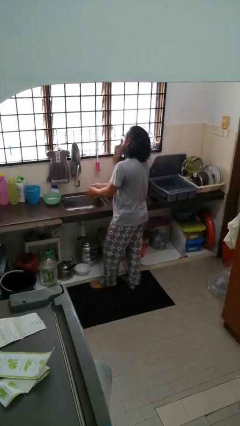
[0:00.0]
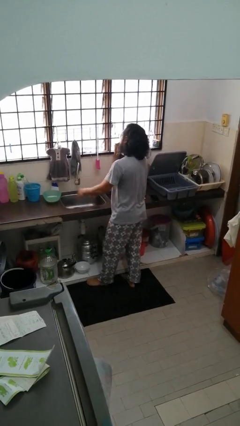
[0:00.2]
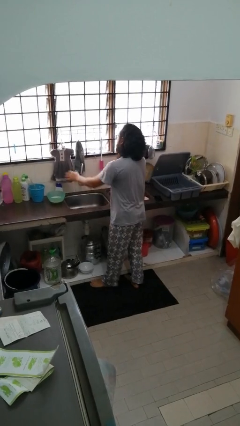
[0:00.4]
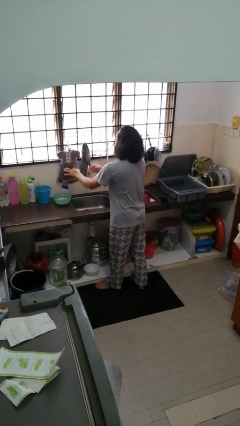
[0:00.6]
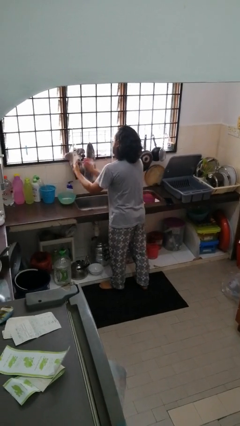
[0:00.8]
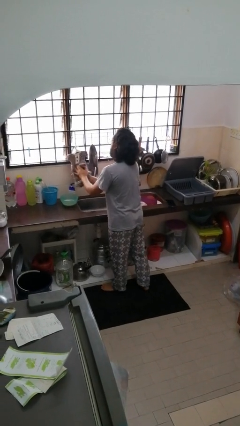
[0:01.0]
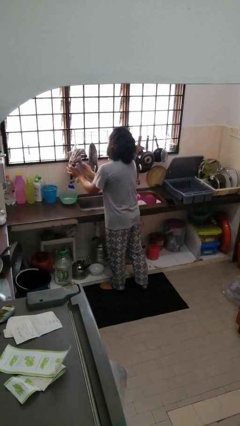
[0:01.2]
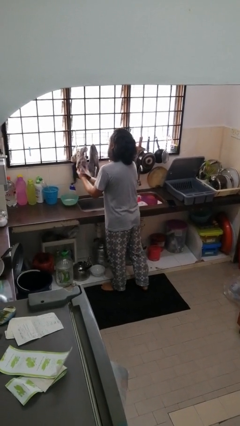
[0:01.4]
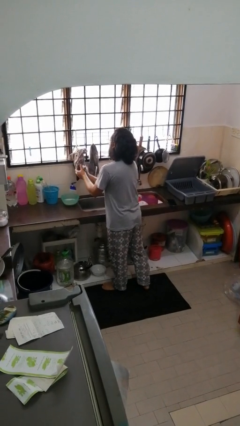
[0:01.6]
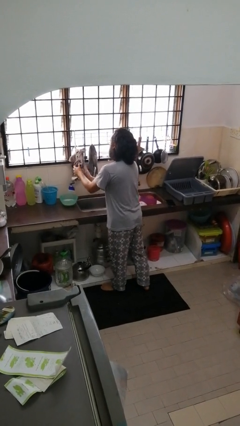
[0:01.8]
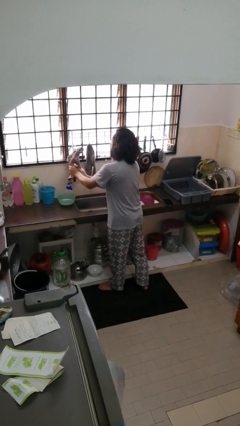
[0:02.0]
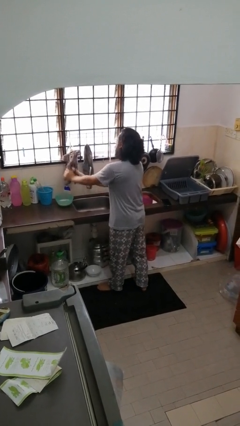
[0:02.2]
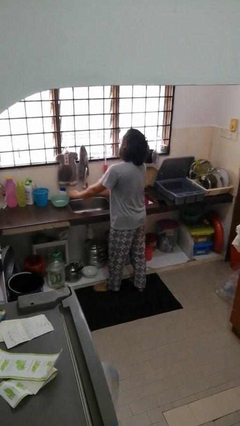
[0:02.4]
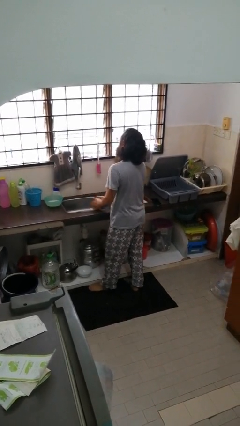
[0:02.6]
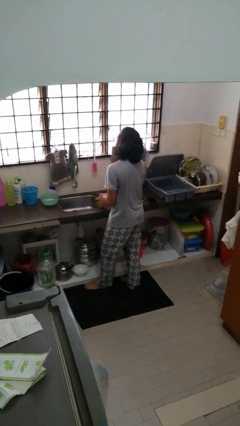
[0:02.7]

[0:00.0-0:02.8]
person dries hands with towel

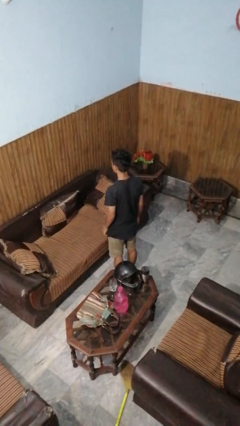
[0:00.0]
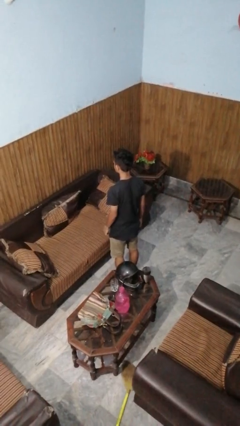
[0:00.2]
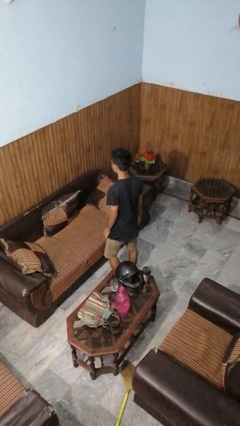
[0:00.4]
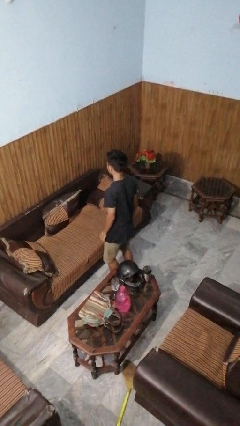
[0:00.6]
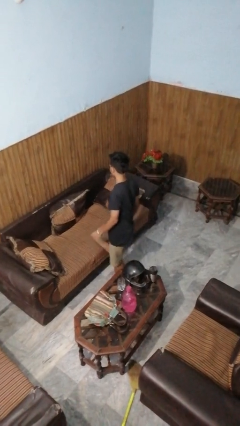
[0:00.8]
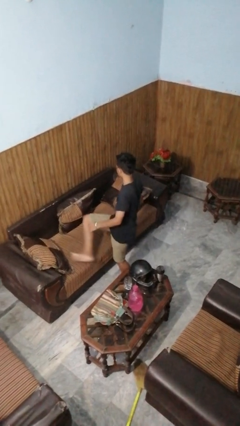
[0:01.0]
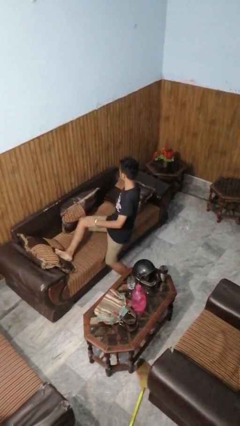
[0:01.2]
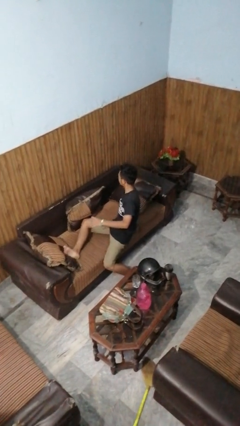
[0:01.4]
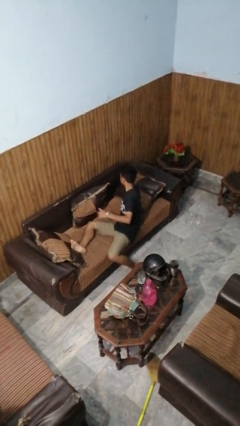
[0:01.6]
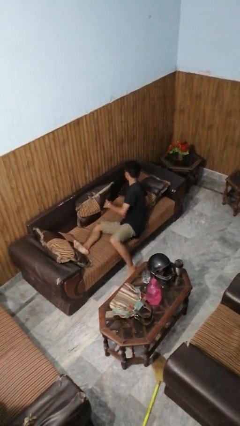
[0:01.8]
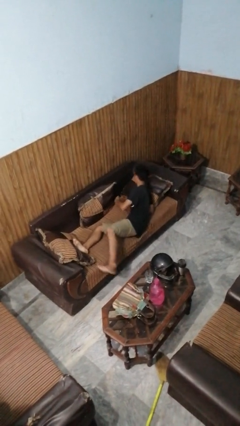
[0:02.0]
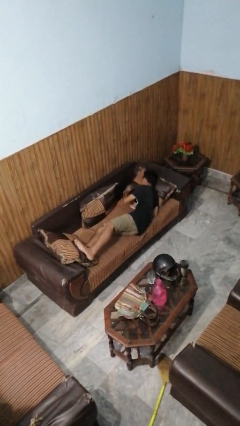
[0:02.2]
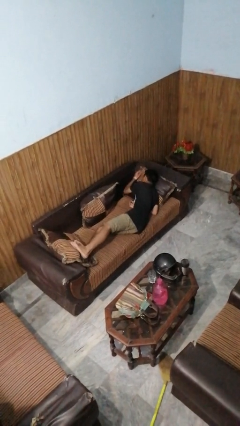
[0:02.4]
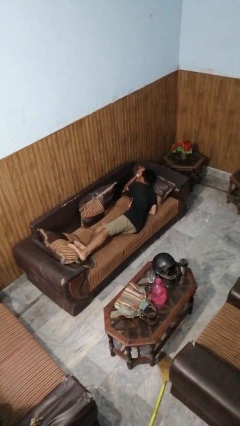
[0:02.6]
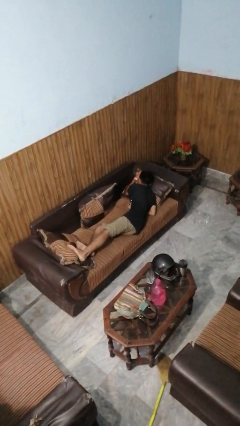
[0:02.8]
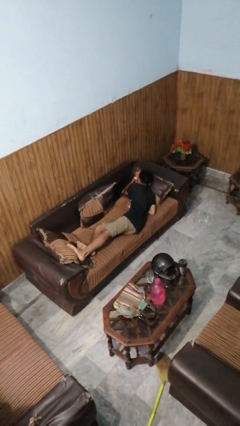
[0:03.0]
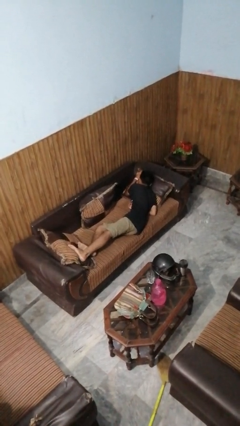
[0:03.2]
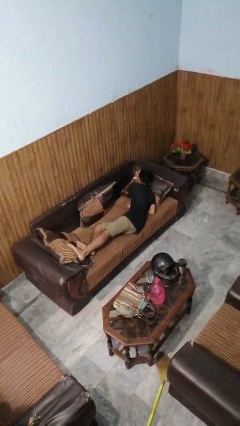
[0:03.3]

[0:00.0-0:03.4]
person lies down on couch

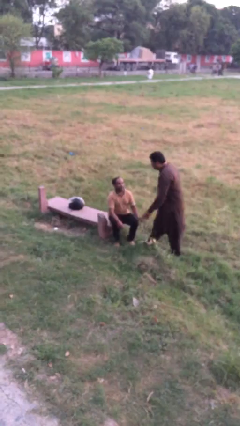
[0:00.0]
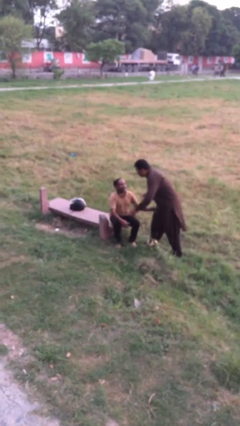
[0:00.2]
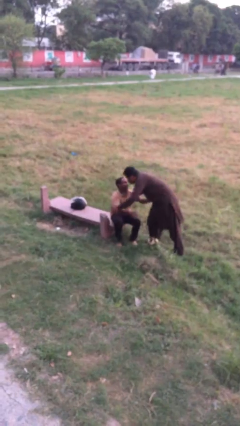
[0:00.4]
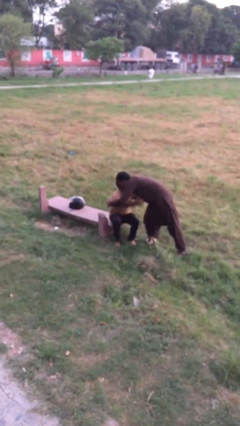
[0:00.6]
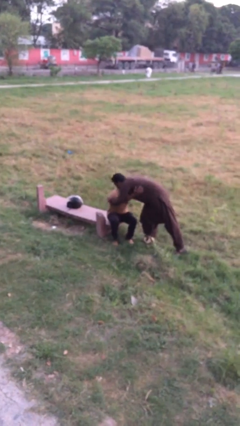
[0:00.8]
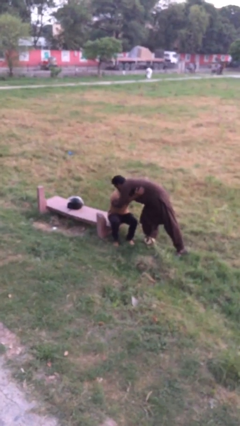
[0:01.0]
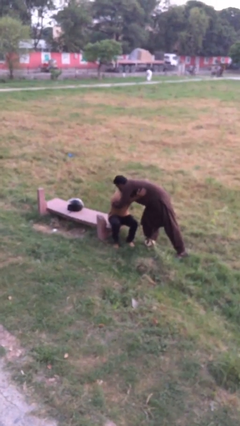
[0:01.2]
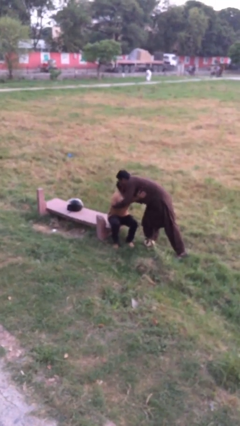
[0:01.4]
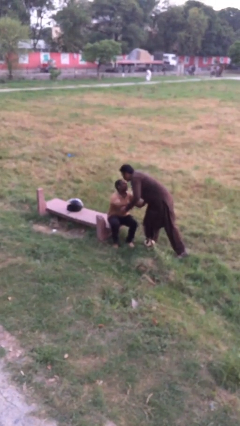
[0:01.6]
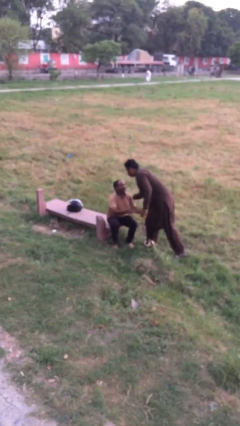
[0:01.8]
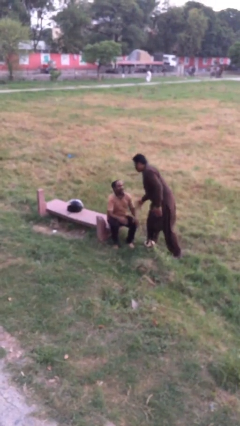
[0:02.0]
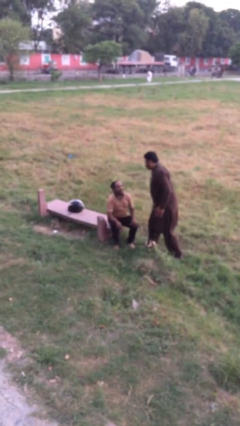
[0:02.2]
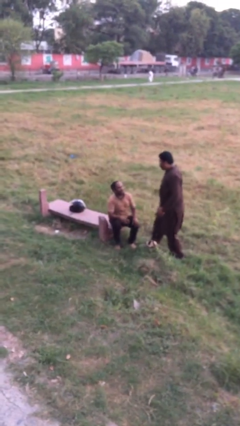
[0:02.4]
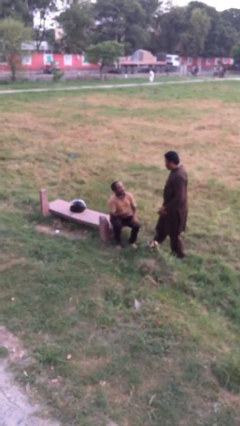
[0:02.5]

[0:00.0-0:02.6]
person embraces person

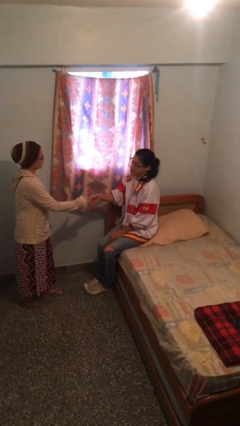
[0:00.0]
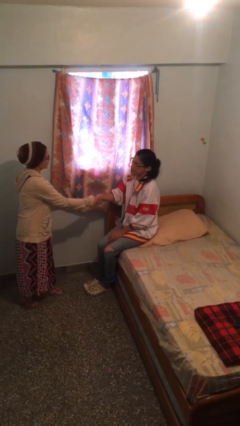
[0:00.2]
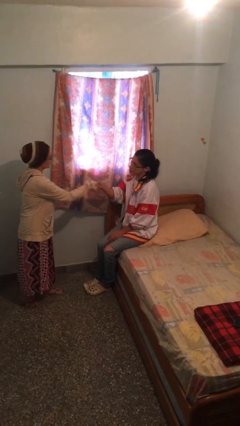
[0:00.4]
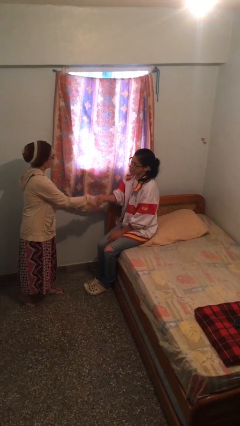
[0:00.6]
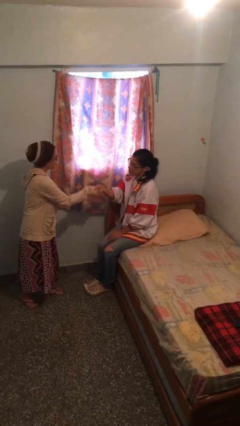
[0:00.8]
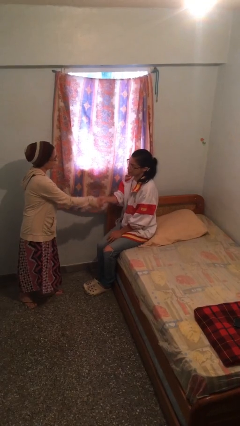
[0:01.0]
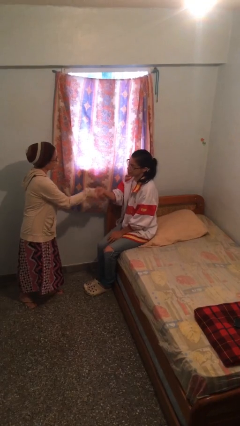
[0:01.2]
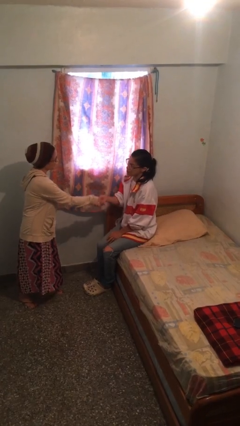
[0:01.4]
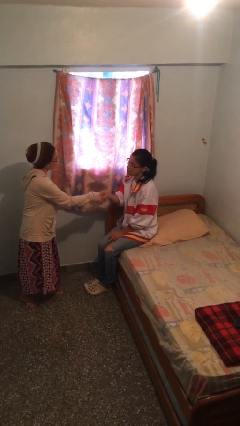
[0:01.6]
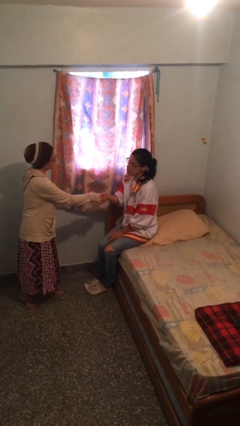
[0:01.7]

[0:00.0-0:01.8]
person shakes hand

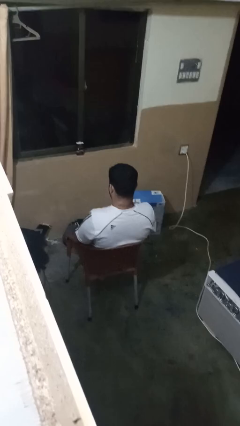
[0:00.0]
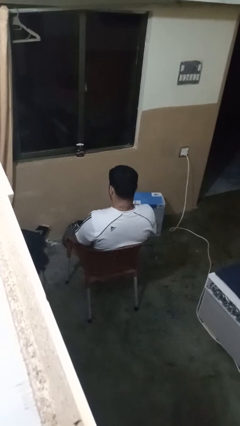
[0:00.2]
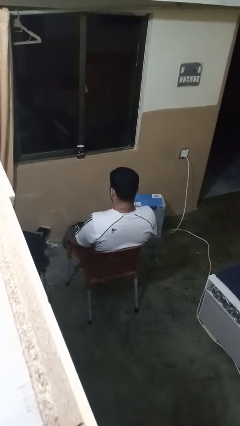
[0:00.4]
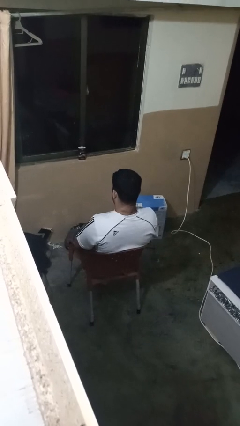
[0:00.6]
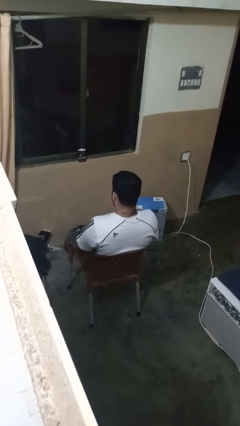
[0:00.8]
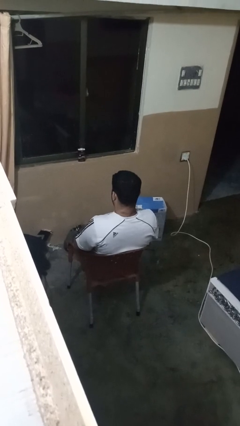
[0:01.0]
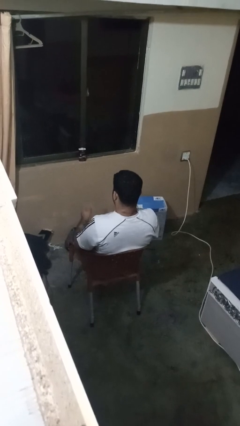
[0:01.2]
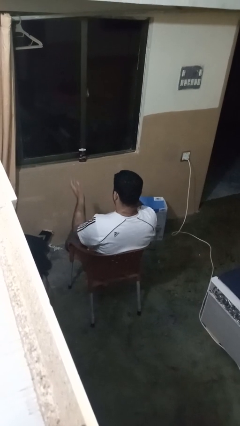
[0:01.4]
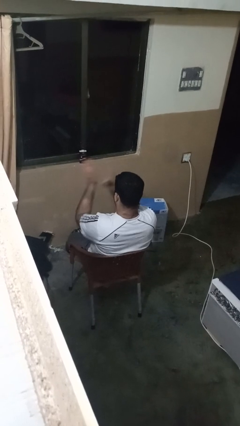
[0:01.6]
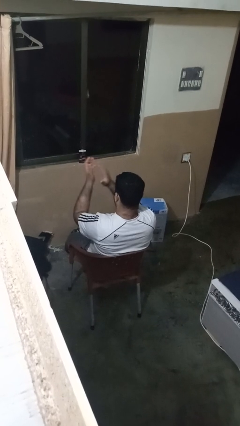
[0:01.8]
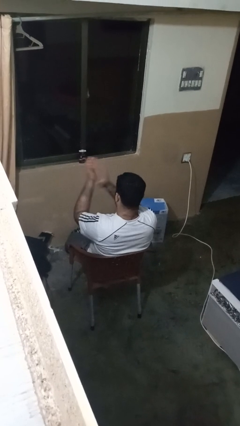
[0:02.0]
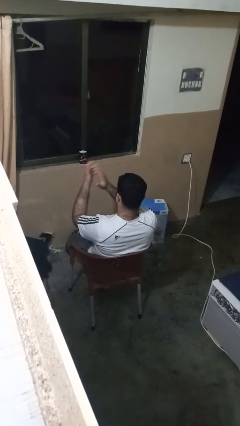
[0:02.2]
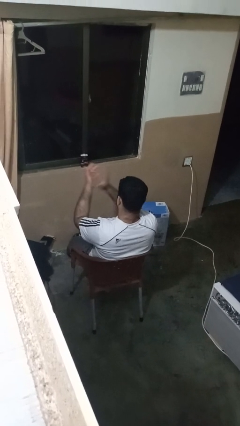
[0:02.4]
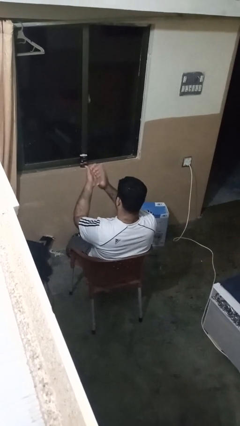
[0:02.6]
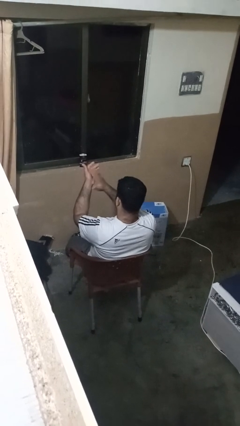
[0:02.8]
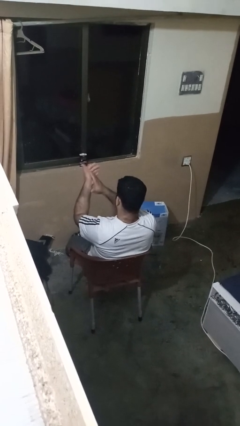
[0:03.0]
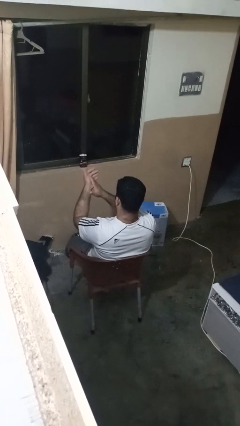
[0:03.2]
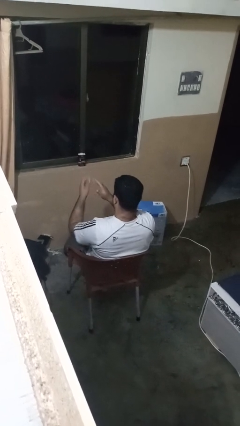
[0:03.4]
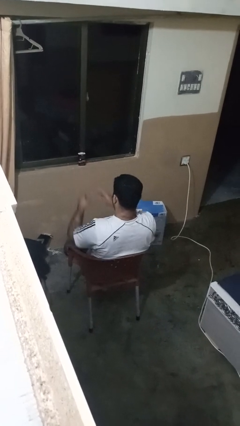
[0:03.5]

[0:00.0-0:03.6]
person claps hands

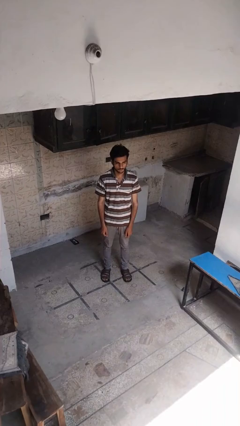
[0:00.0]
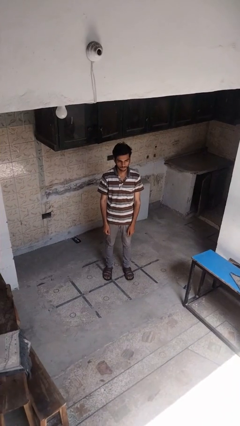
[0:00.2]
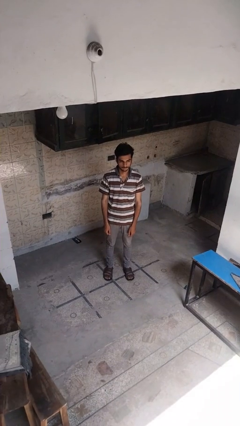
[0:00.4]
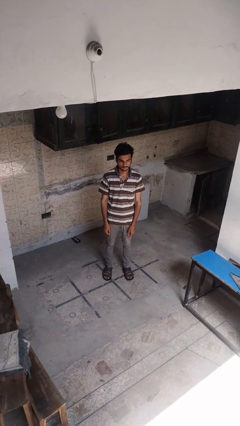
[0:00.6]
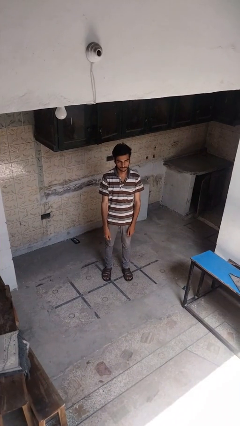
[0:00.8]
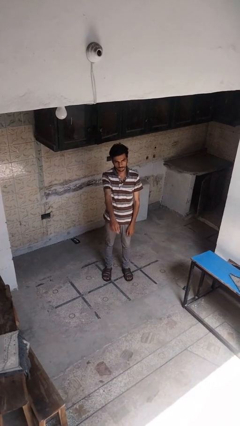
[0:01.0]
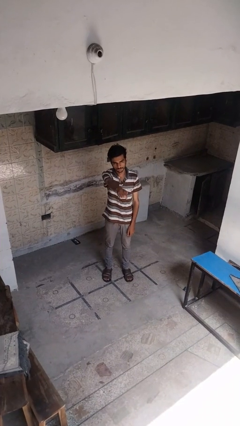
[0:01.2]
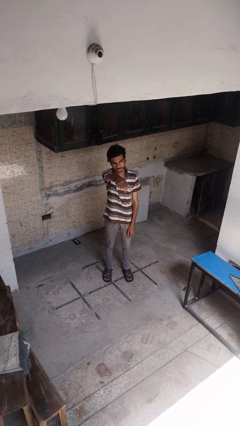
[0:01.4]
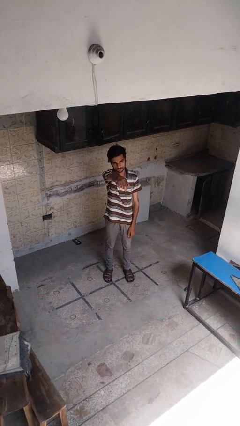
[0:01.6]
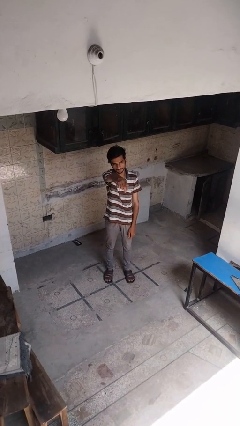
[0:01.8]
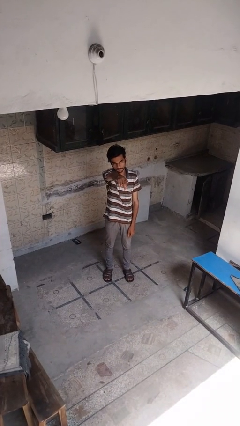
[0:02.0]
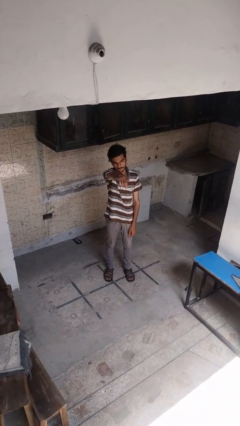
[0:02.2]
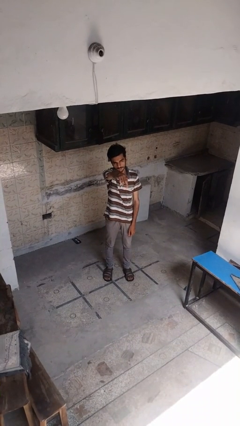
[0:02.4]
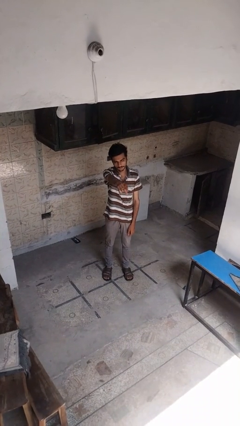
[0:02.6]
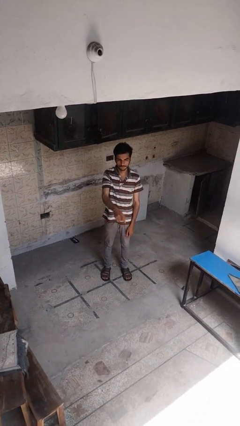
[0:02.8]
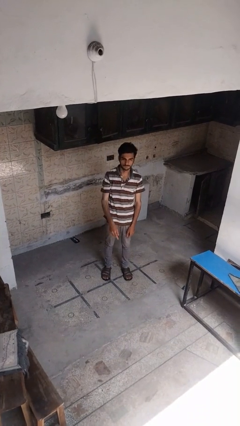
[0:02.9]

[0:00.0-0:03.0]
person points at person

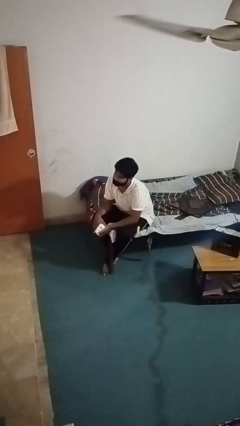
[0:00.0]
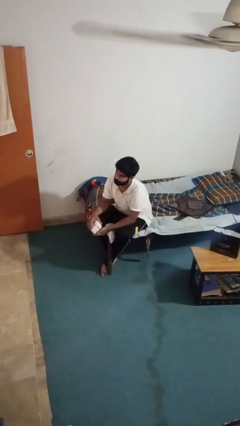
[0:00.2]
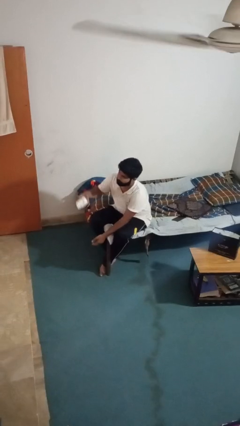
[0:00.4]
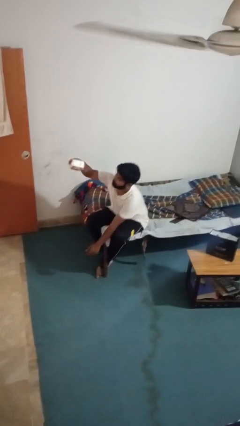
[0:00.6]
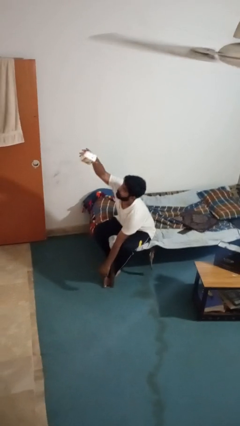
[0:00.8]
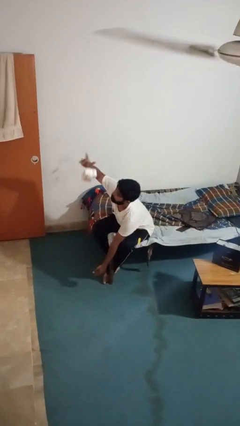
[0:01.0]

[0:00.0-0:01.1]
person drops object
